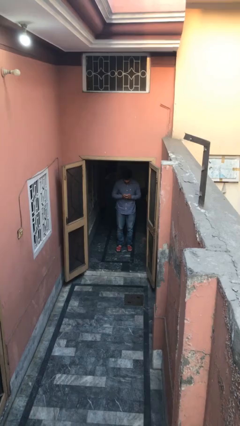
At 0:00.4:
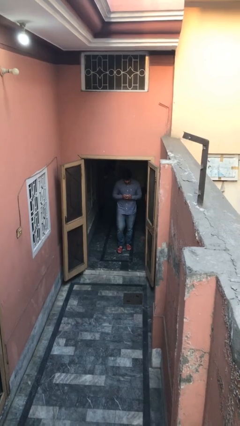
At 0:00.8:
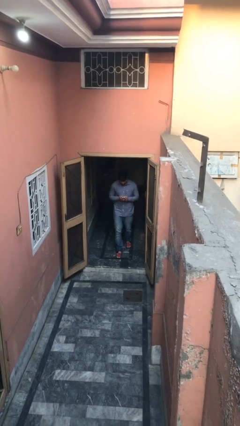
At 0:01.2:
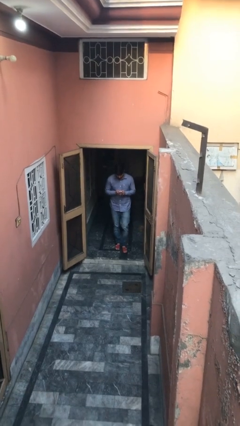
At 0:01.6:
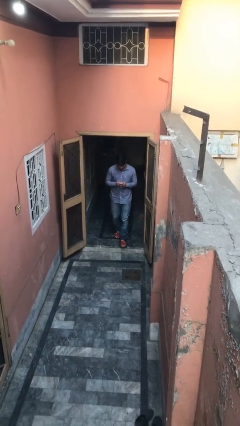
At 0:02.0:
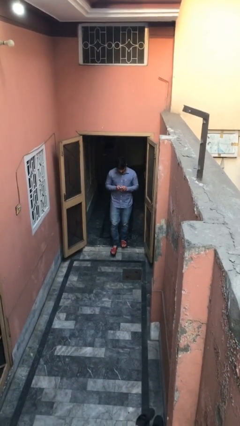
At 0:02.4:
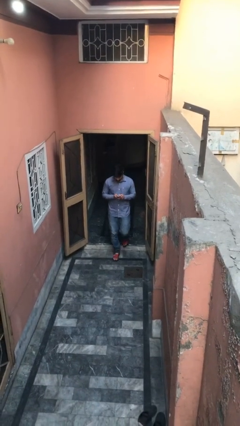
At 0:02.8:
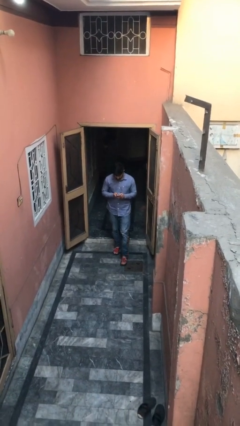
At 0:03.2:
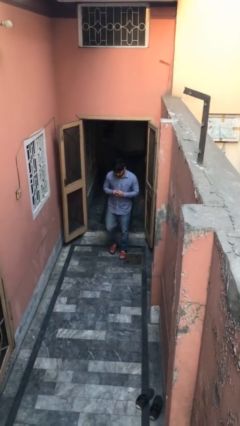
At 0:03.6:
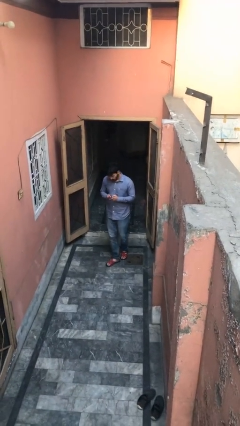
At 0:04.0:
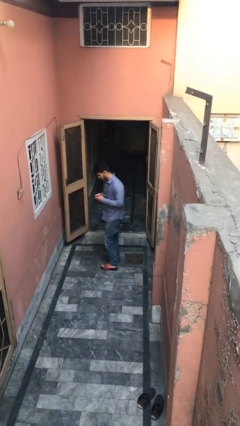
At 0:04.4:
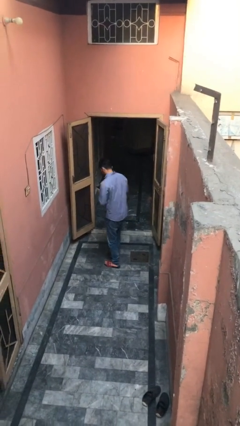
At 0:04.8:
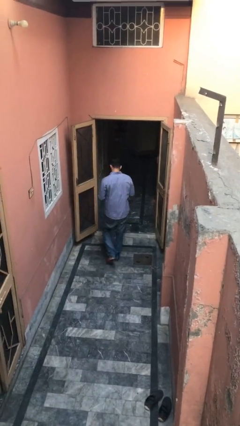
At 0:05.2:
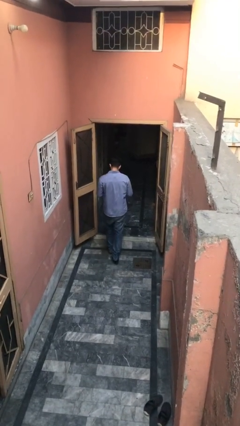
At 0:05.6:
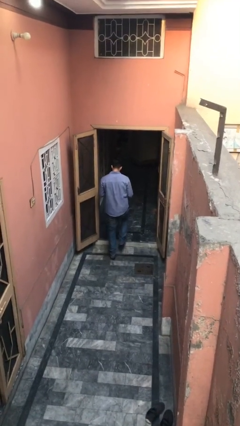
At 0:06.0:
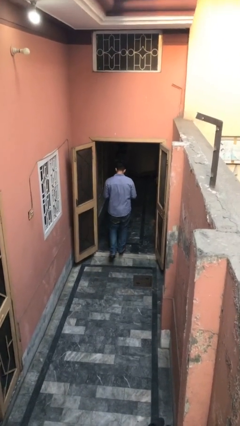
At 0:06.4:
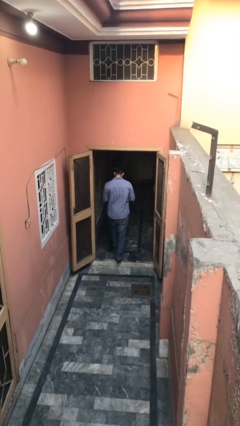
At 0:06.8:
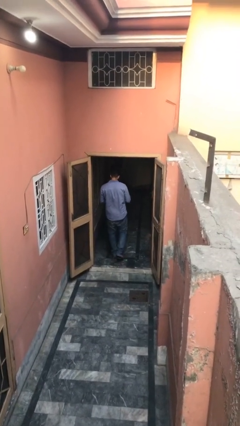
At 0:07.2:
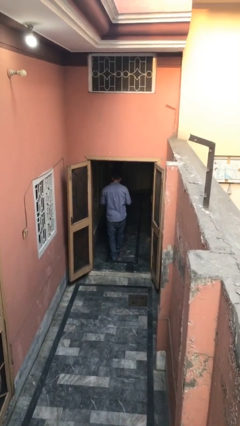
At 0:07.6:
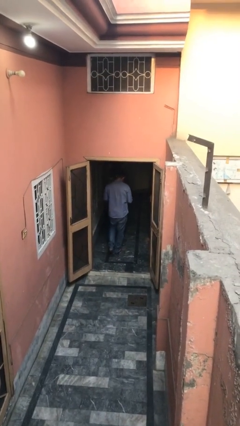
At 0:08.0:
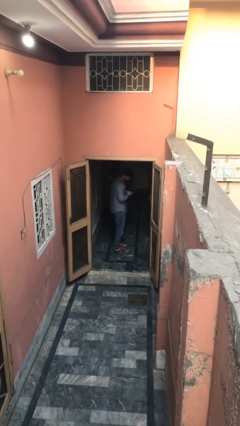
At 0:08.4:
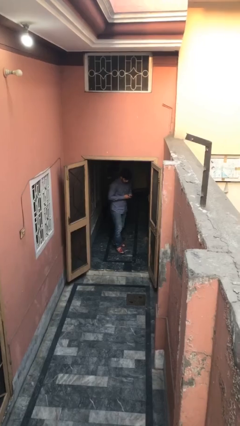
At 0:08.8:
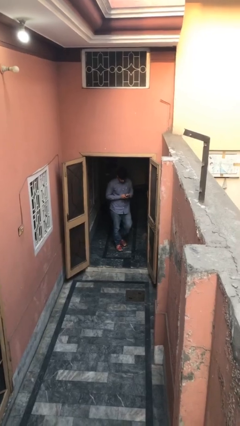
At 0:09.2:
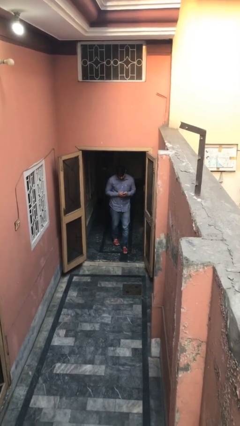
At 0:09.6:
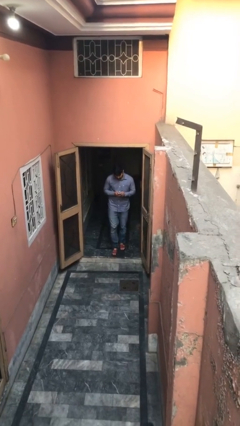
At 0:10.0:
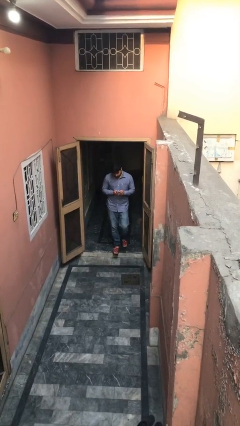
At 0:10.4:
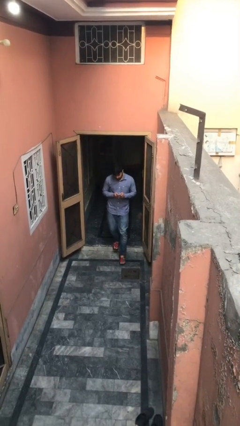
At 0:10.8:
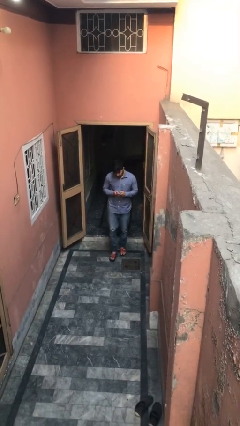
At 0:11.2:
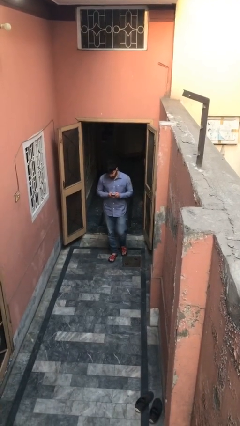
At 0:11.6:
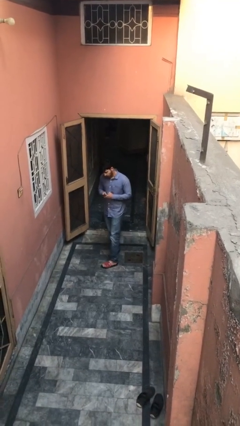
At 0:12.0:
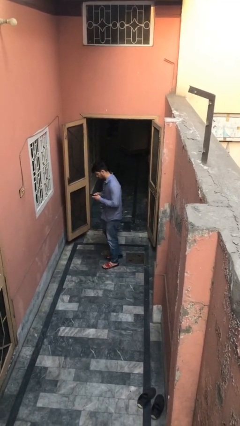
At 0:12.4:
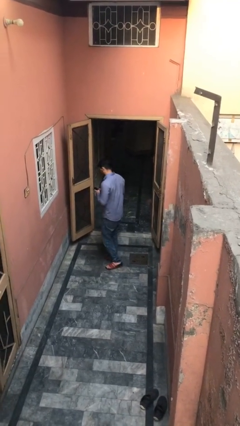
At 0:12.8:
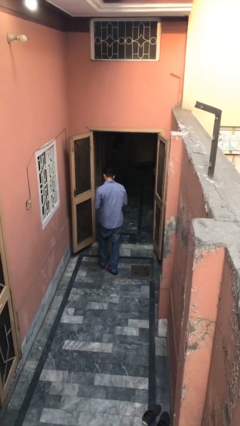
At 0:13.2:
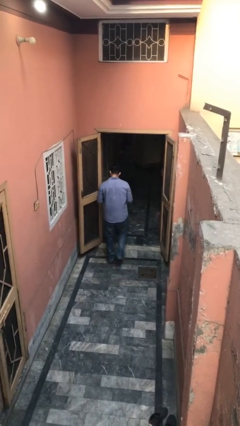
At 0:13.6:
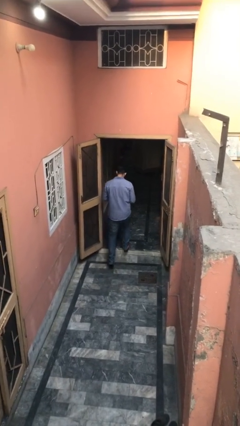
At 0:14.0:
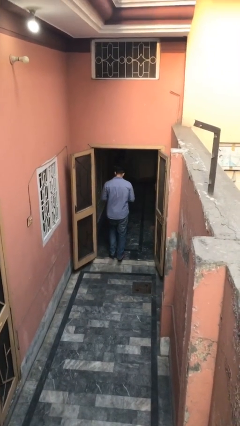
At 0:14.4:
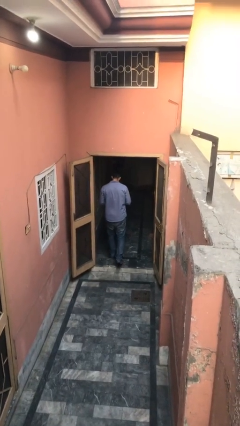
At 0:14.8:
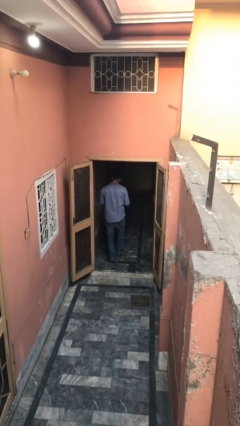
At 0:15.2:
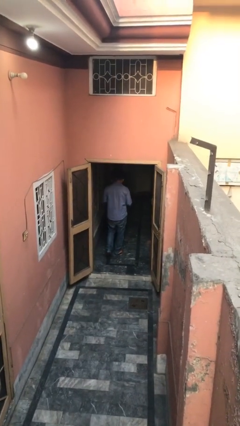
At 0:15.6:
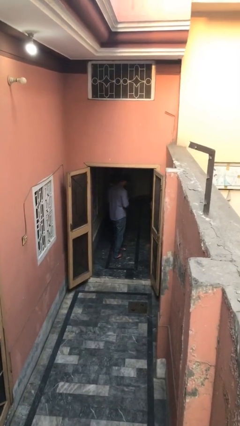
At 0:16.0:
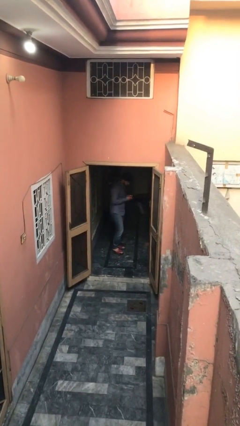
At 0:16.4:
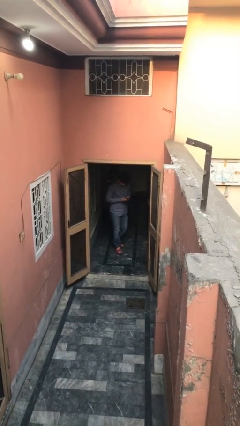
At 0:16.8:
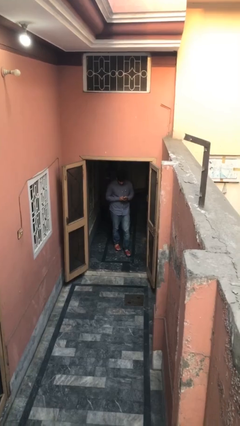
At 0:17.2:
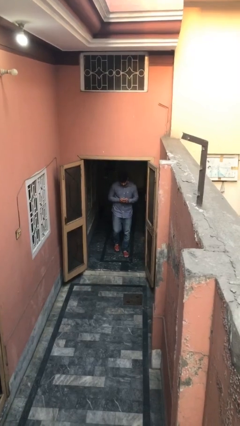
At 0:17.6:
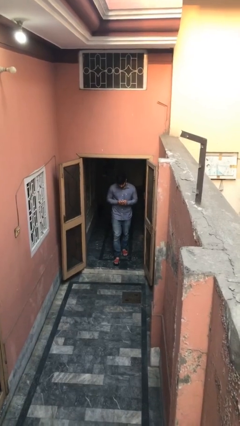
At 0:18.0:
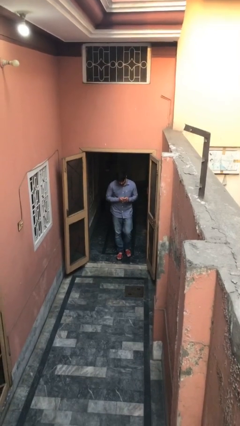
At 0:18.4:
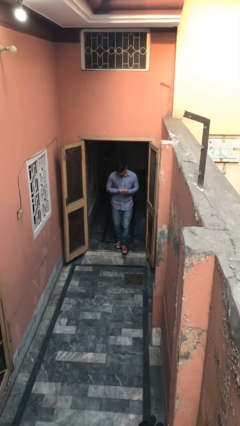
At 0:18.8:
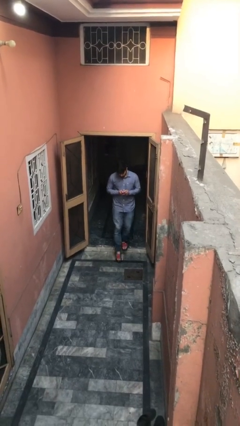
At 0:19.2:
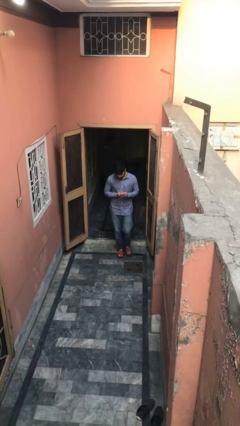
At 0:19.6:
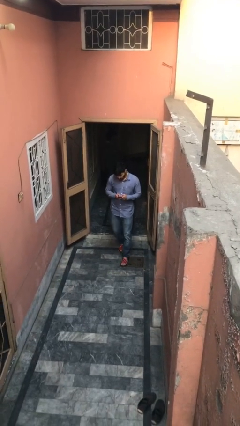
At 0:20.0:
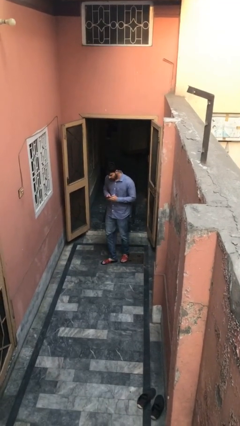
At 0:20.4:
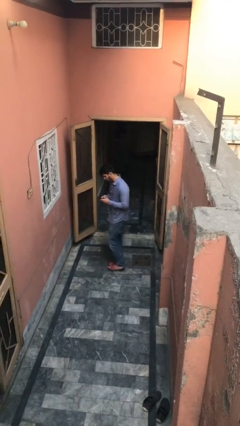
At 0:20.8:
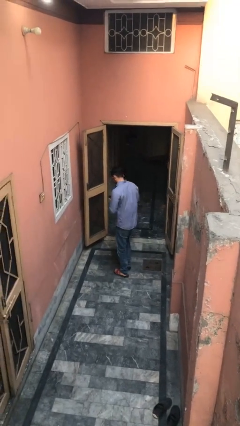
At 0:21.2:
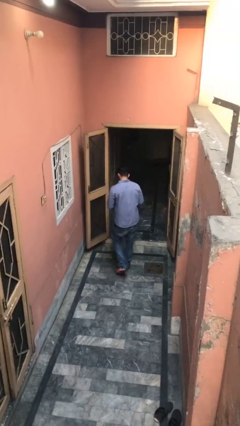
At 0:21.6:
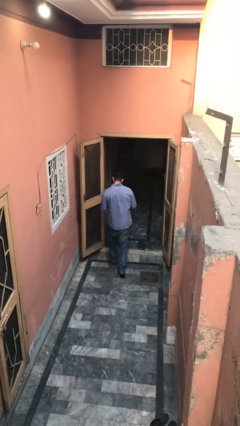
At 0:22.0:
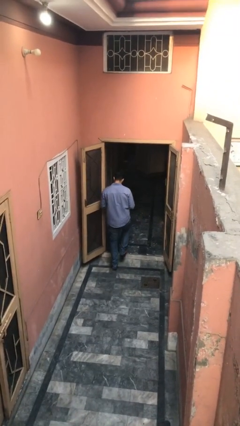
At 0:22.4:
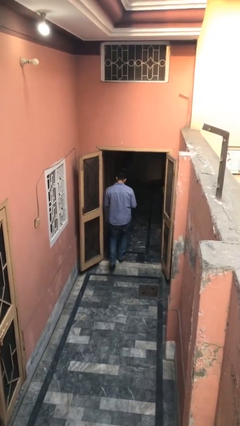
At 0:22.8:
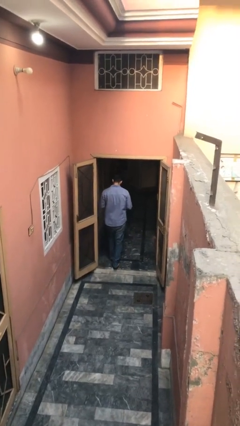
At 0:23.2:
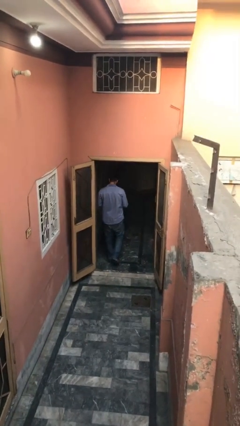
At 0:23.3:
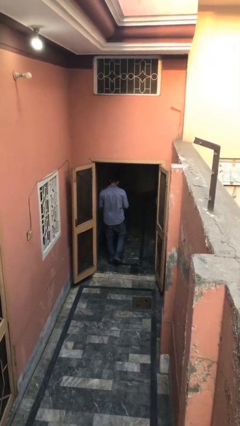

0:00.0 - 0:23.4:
person texts on phone

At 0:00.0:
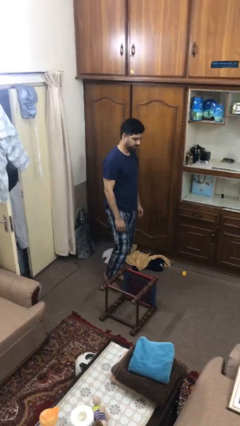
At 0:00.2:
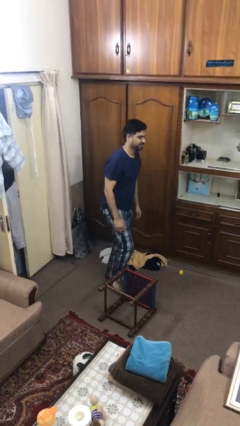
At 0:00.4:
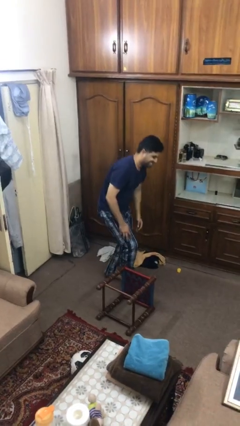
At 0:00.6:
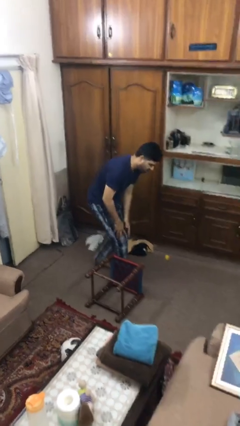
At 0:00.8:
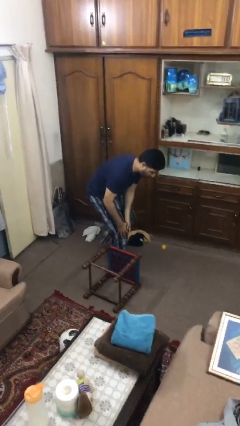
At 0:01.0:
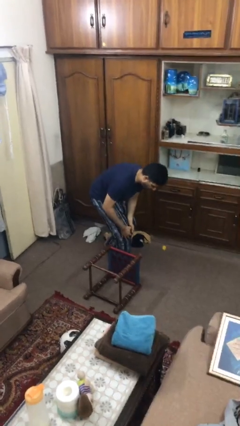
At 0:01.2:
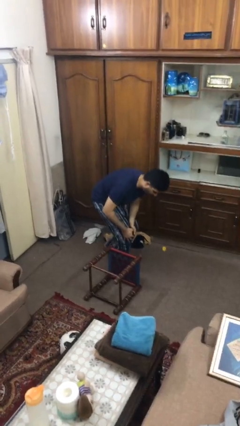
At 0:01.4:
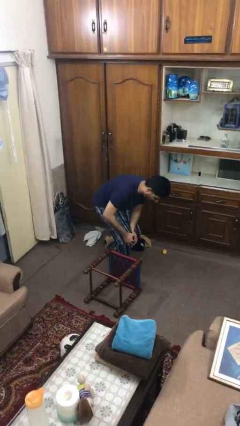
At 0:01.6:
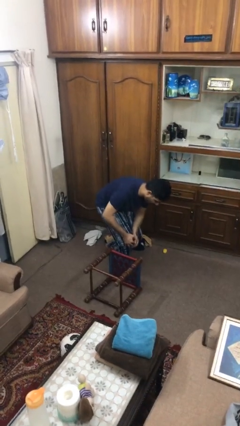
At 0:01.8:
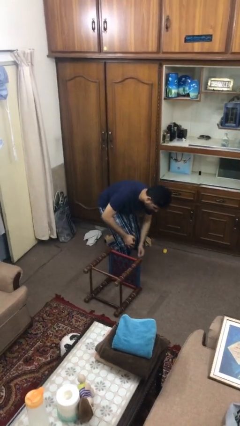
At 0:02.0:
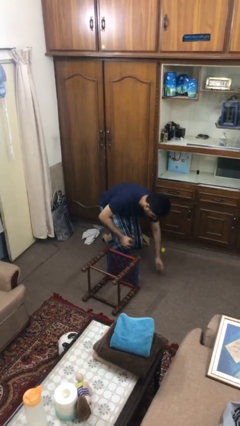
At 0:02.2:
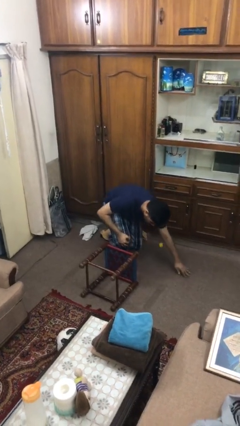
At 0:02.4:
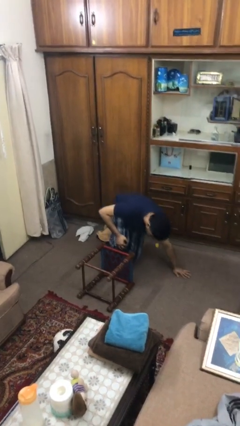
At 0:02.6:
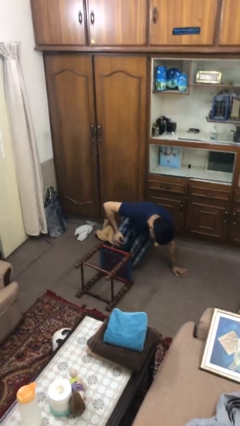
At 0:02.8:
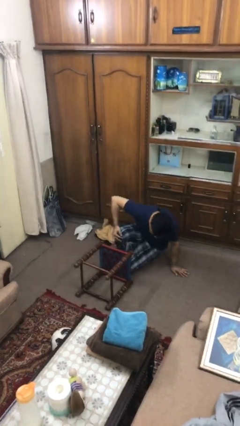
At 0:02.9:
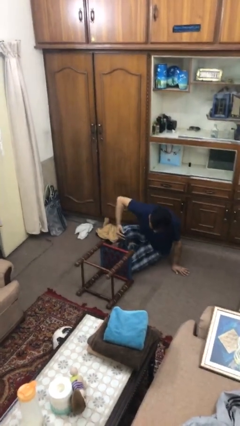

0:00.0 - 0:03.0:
person trips on object on floor

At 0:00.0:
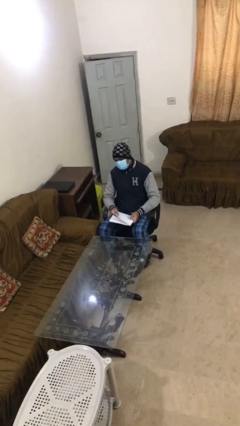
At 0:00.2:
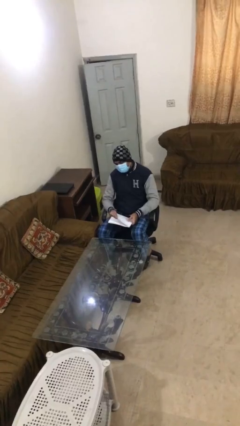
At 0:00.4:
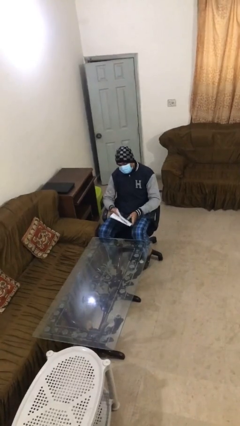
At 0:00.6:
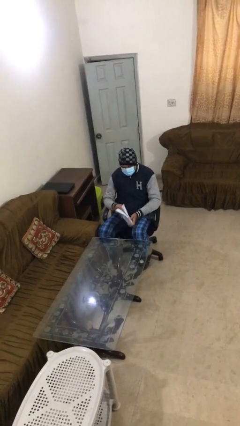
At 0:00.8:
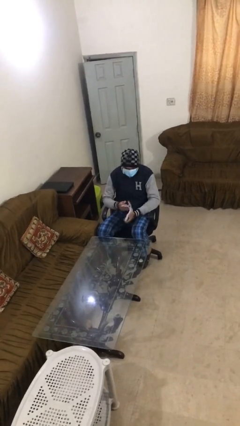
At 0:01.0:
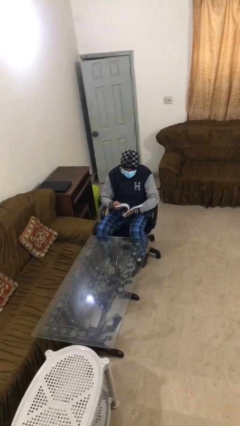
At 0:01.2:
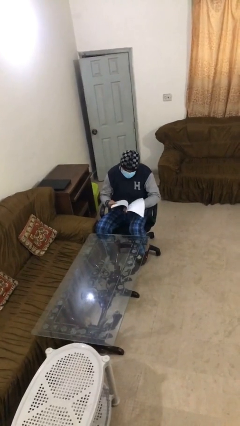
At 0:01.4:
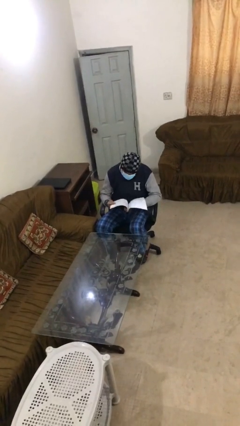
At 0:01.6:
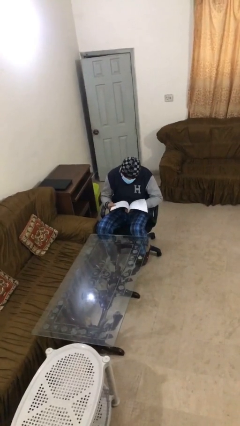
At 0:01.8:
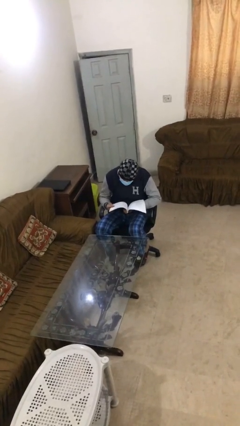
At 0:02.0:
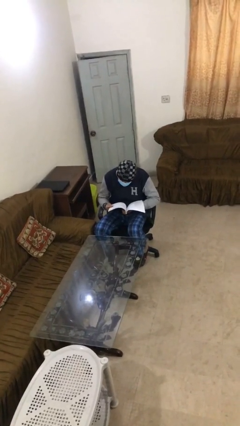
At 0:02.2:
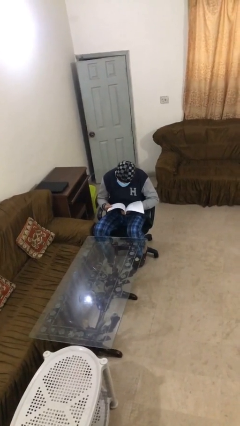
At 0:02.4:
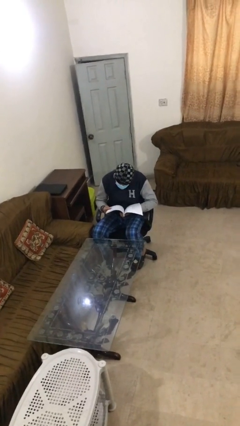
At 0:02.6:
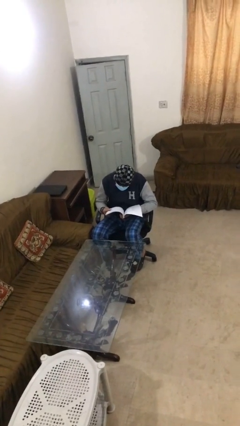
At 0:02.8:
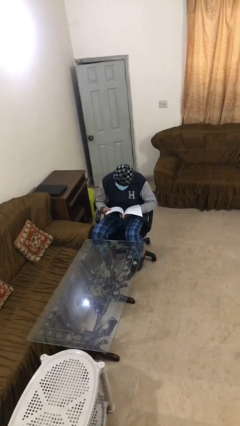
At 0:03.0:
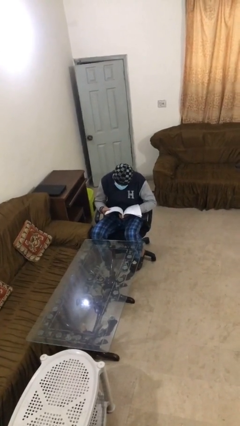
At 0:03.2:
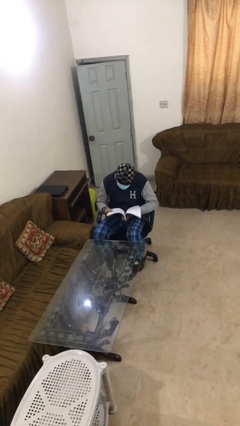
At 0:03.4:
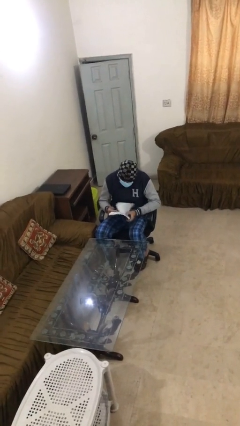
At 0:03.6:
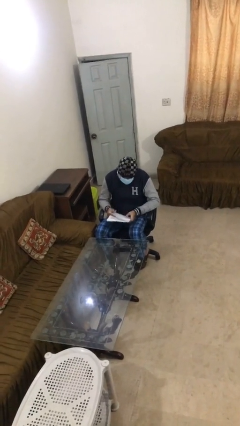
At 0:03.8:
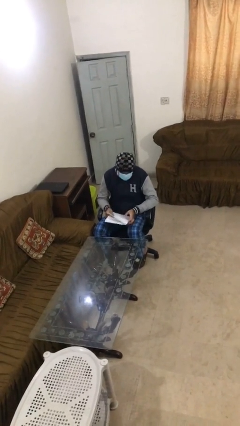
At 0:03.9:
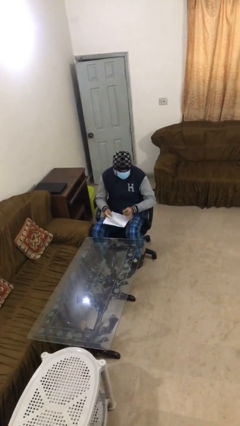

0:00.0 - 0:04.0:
person reads document
